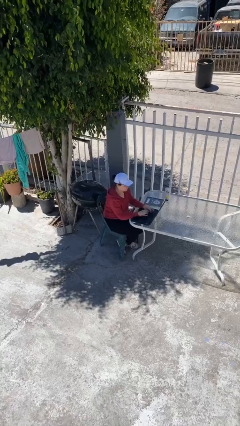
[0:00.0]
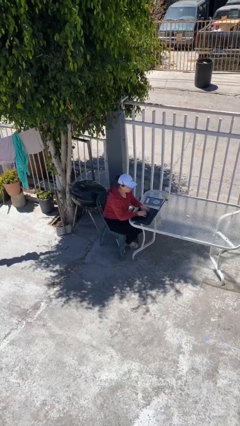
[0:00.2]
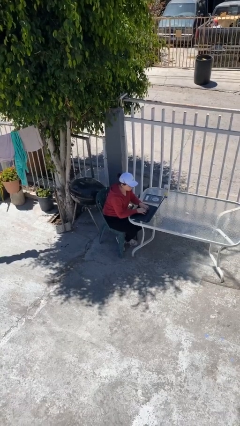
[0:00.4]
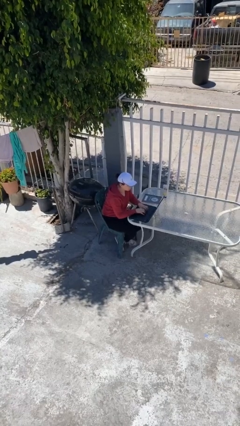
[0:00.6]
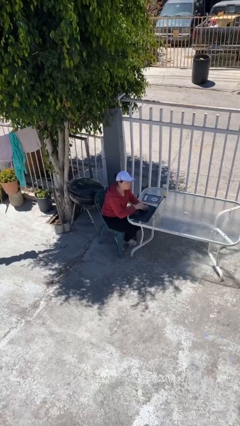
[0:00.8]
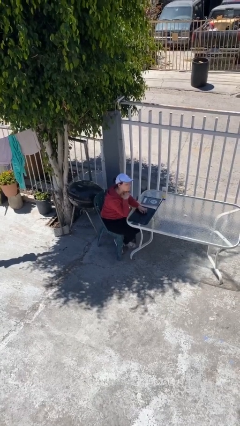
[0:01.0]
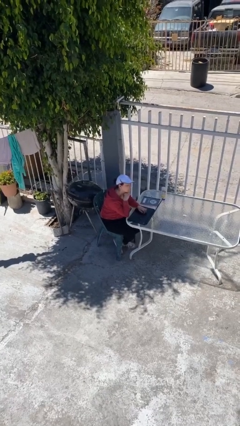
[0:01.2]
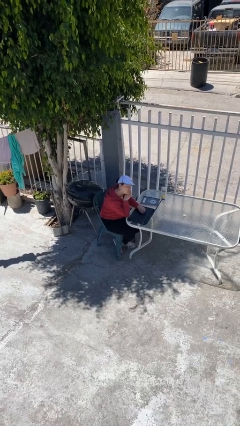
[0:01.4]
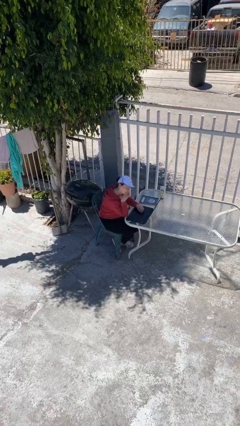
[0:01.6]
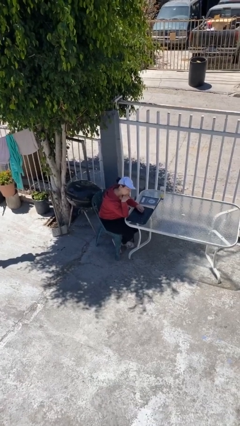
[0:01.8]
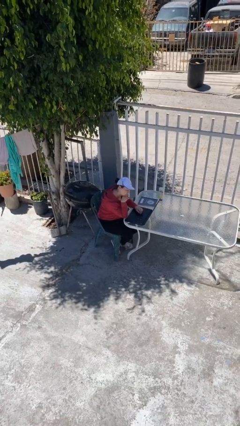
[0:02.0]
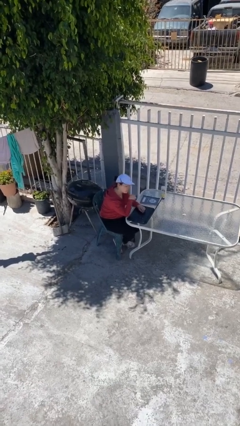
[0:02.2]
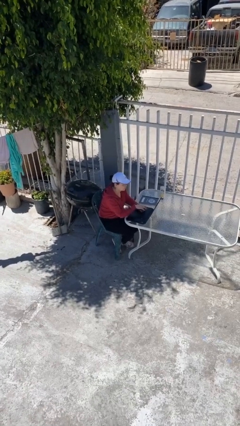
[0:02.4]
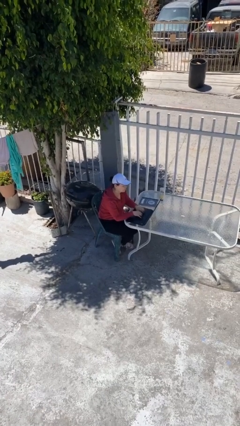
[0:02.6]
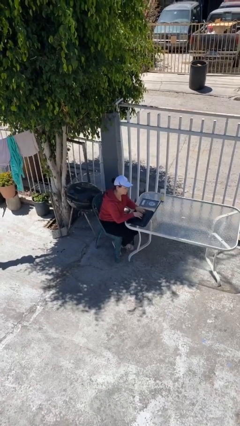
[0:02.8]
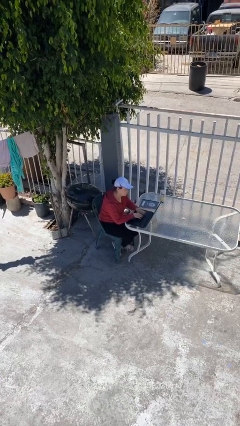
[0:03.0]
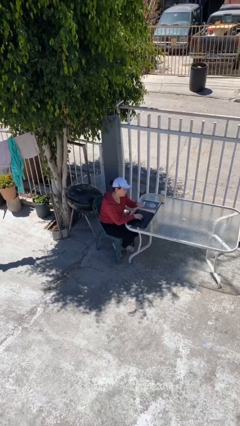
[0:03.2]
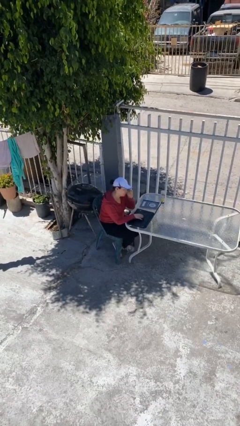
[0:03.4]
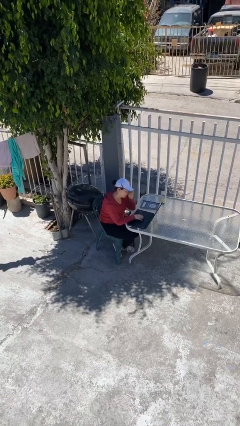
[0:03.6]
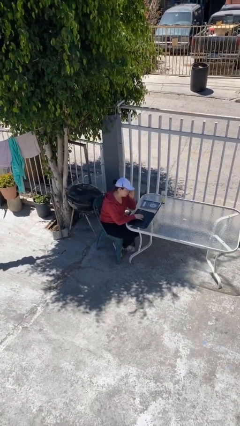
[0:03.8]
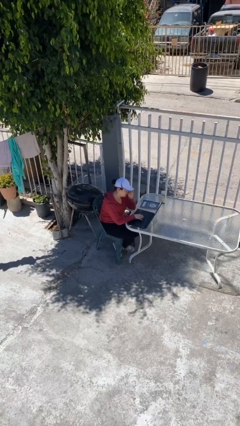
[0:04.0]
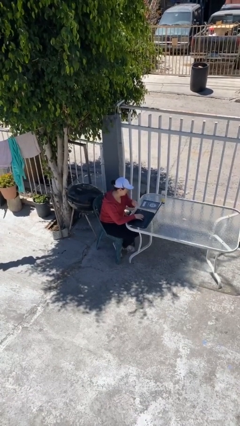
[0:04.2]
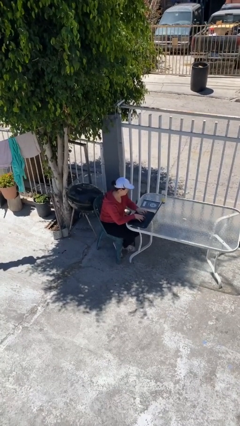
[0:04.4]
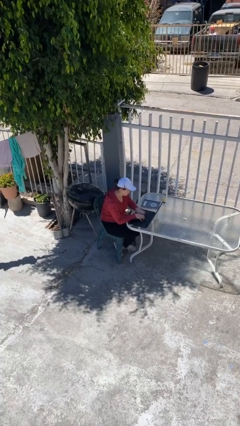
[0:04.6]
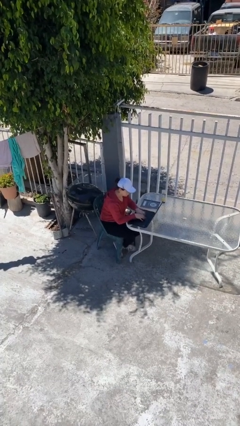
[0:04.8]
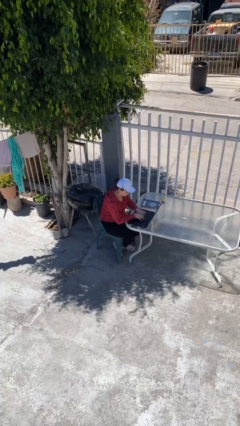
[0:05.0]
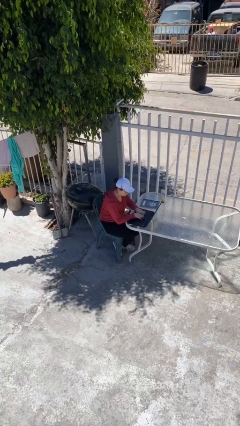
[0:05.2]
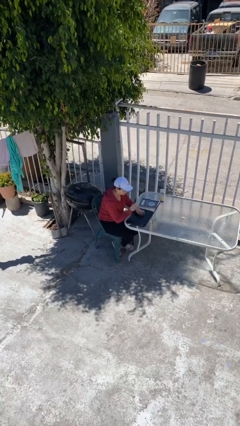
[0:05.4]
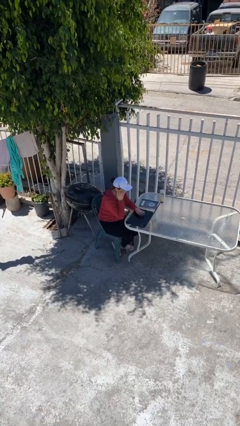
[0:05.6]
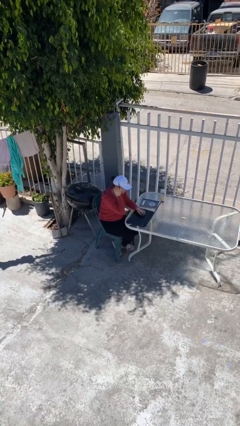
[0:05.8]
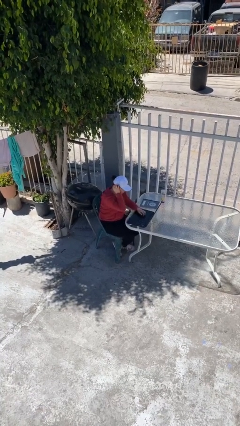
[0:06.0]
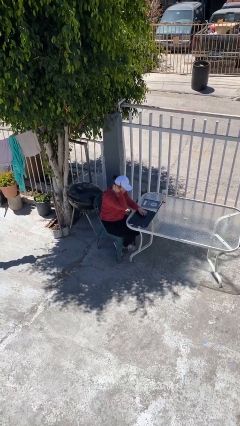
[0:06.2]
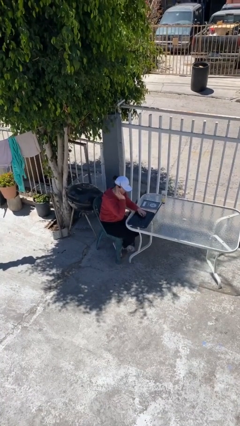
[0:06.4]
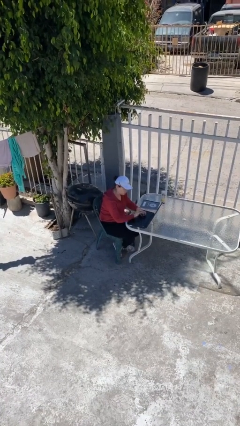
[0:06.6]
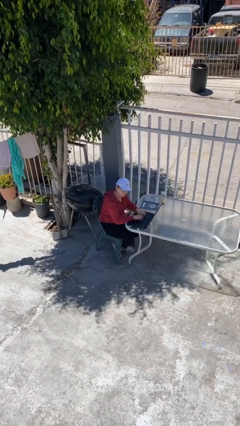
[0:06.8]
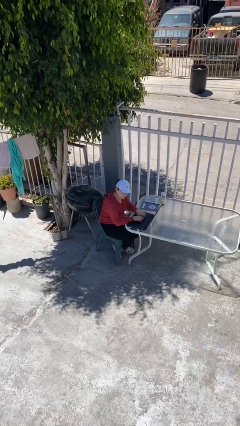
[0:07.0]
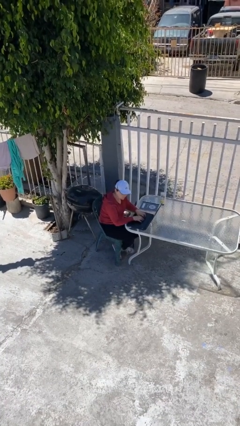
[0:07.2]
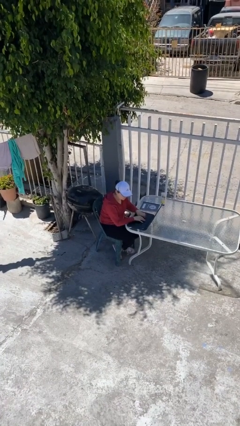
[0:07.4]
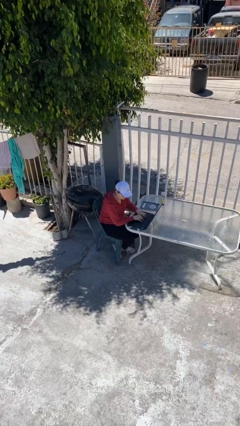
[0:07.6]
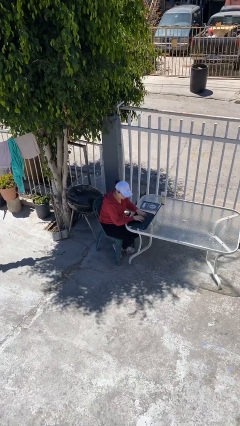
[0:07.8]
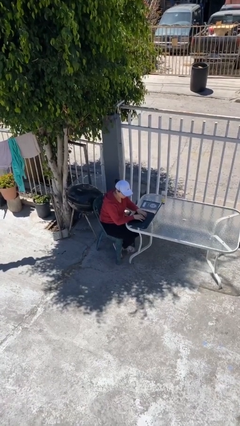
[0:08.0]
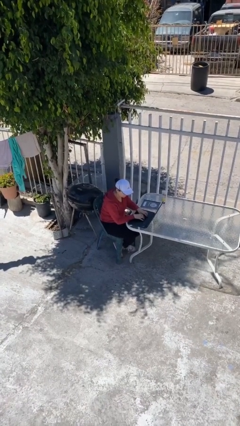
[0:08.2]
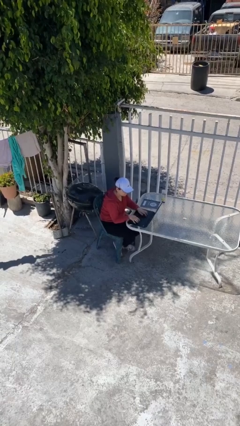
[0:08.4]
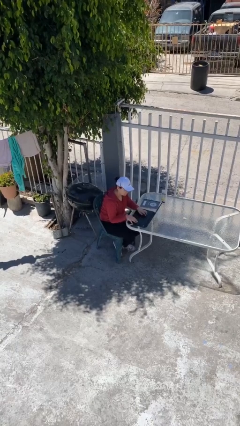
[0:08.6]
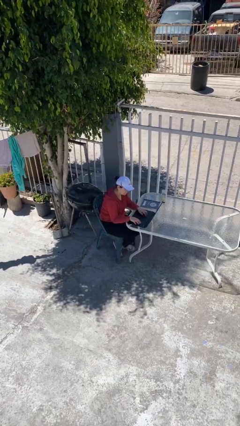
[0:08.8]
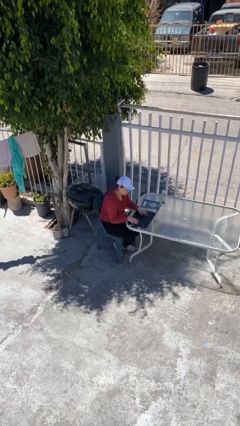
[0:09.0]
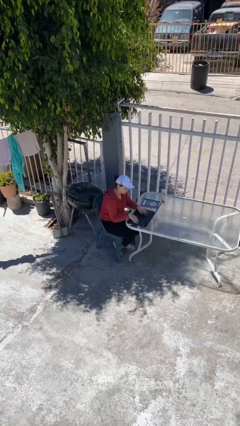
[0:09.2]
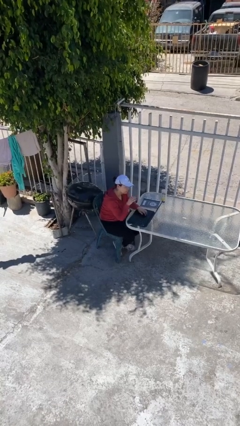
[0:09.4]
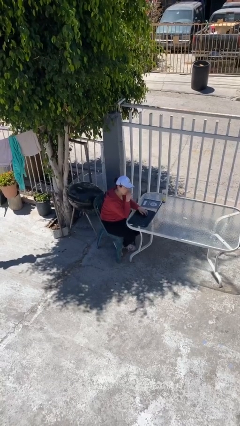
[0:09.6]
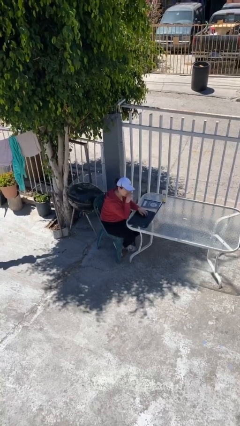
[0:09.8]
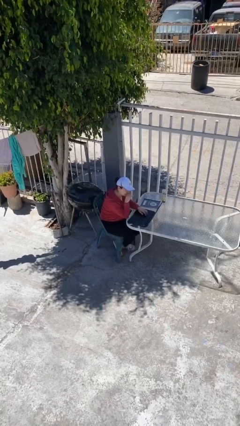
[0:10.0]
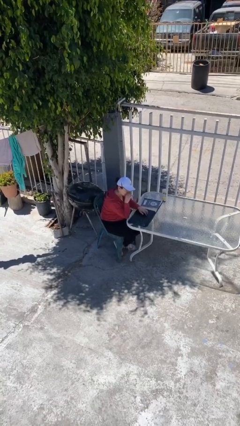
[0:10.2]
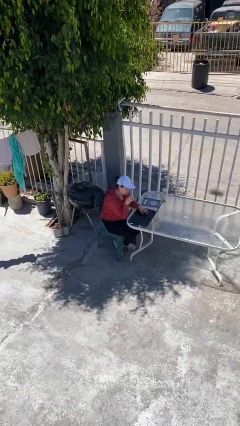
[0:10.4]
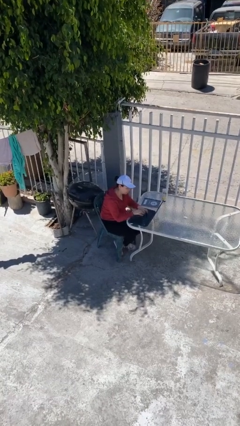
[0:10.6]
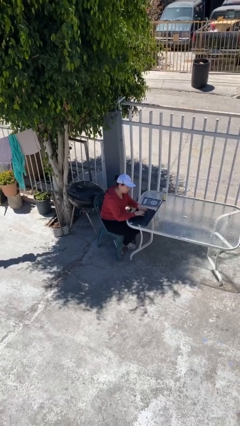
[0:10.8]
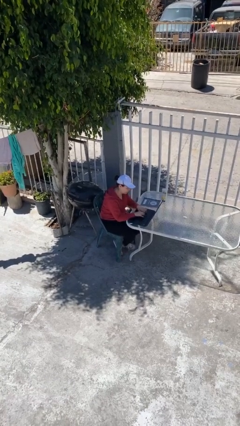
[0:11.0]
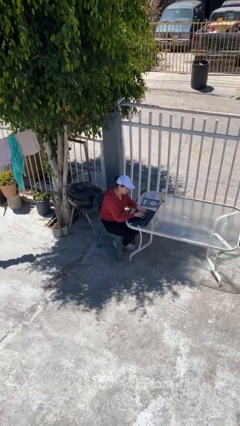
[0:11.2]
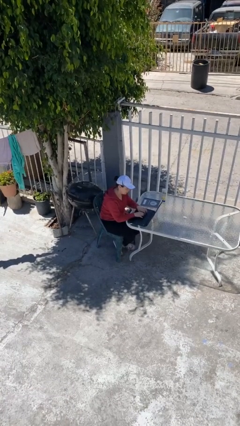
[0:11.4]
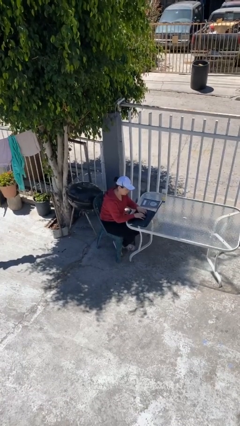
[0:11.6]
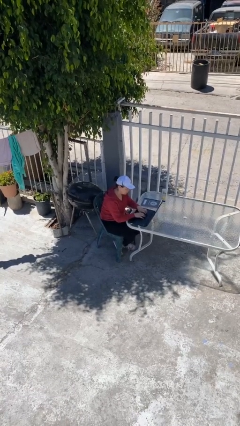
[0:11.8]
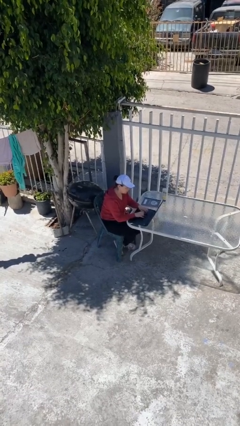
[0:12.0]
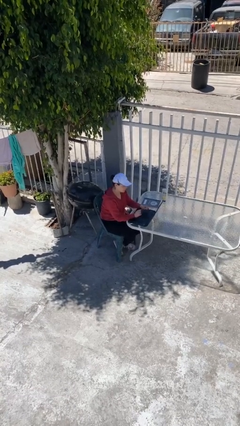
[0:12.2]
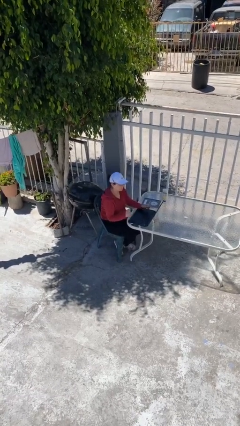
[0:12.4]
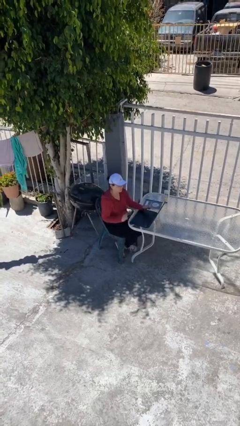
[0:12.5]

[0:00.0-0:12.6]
person interacts with laptop

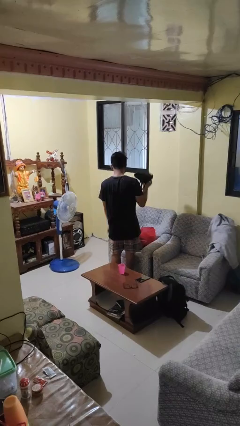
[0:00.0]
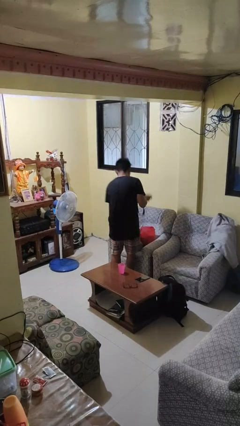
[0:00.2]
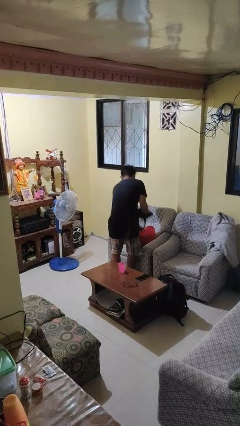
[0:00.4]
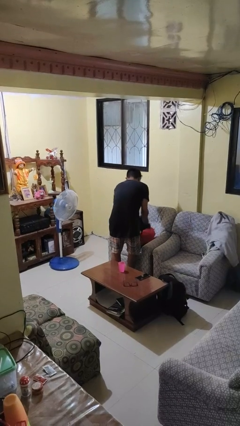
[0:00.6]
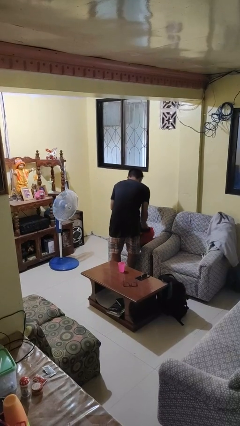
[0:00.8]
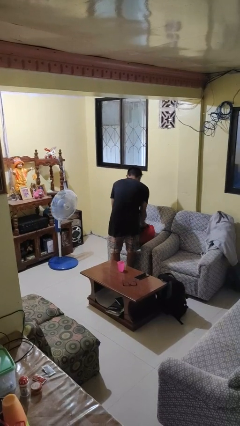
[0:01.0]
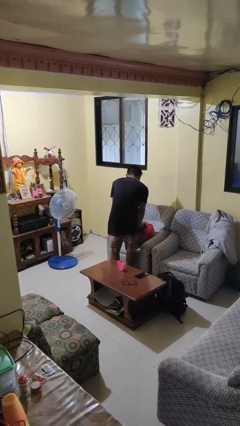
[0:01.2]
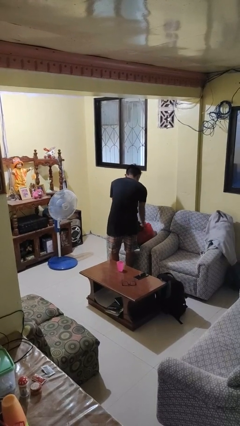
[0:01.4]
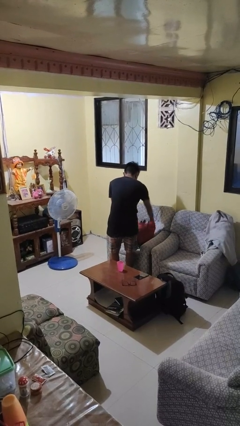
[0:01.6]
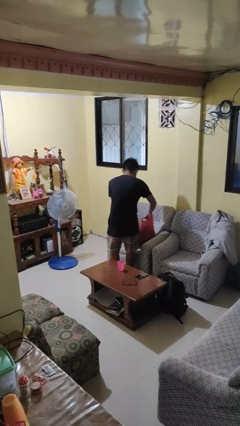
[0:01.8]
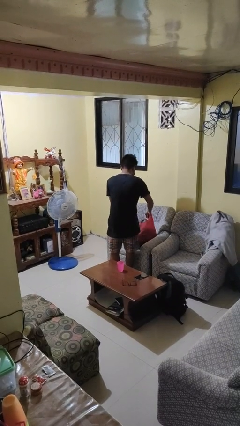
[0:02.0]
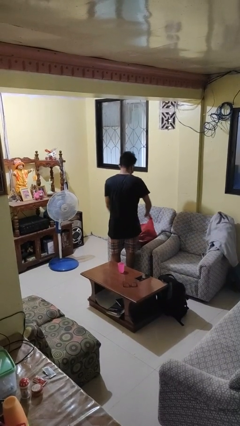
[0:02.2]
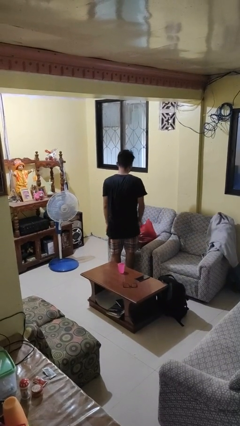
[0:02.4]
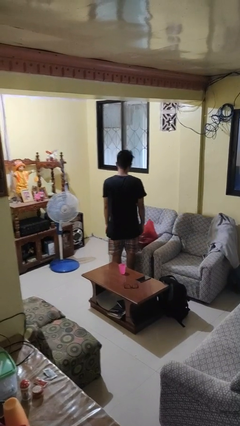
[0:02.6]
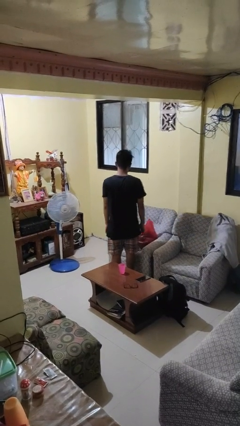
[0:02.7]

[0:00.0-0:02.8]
person puts object into bag

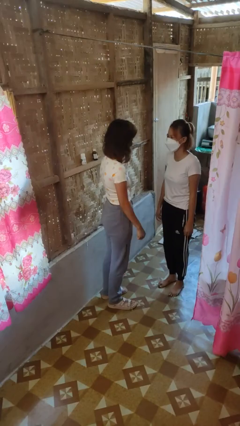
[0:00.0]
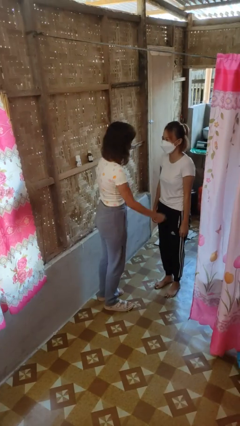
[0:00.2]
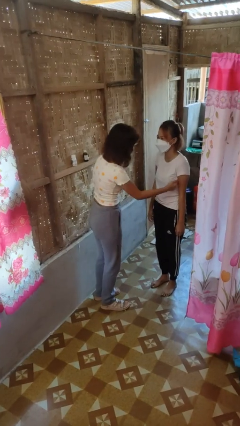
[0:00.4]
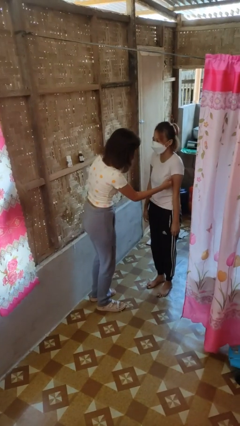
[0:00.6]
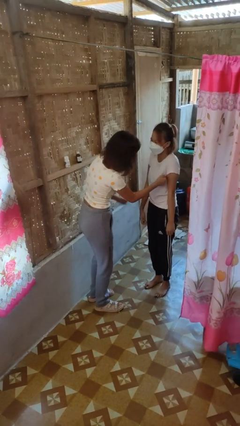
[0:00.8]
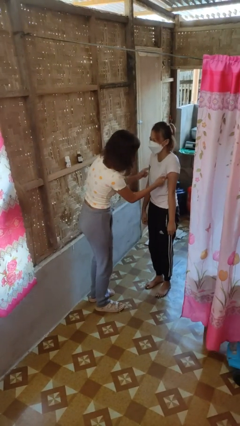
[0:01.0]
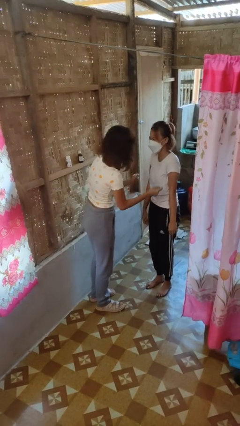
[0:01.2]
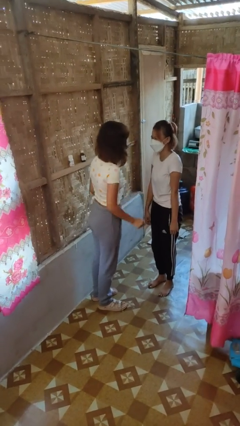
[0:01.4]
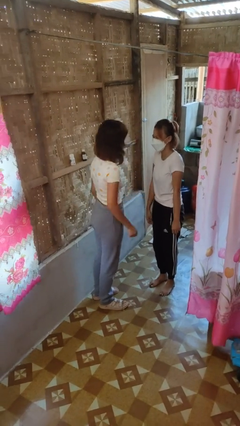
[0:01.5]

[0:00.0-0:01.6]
person tickles person

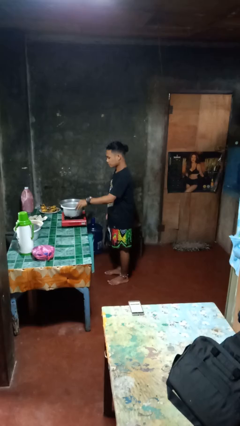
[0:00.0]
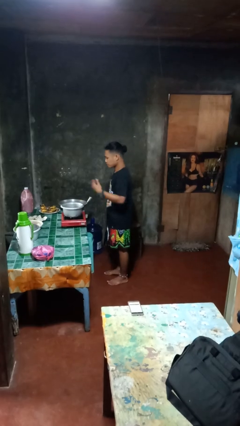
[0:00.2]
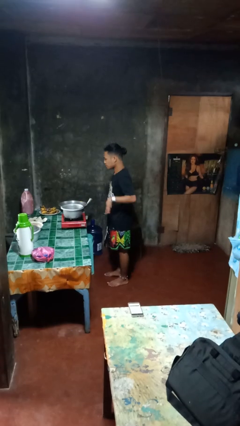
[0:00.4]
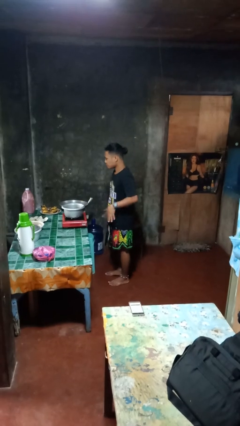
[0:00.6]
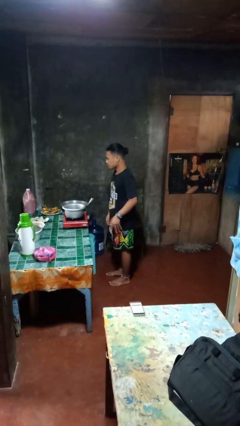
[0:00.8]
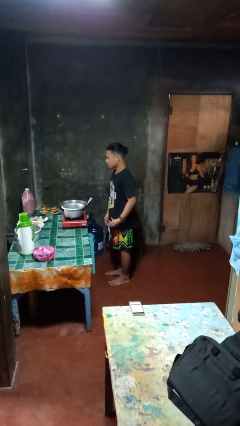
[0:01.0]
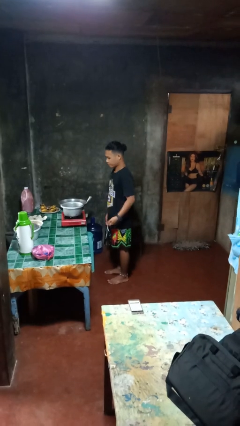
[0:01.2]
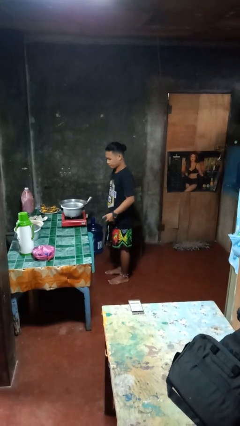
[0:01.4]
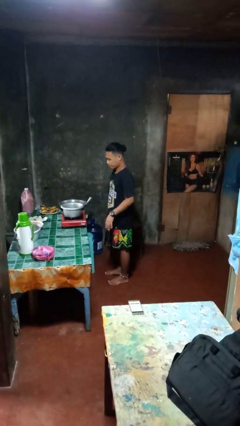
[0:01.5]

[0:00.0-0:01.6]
person burns hand
